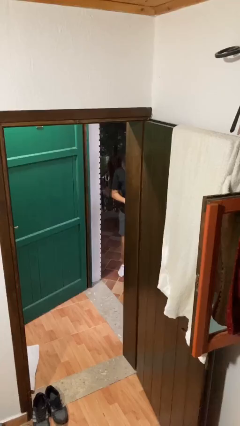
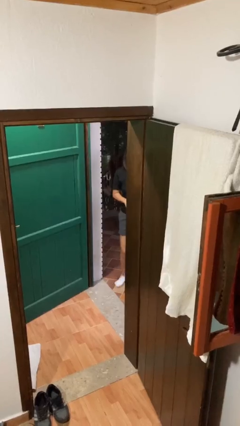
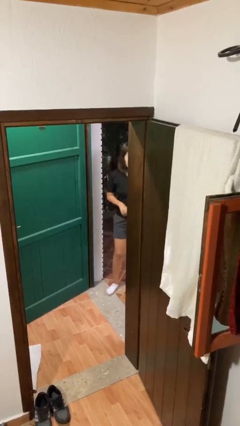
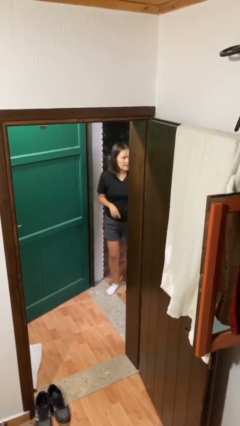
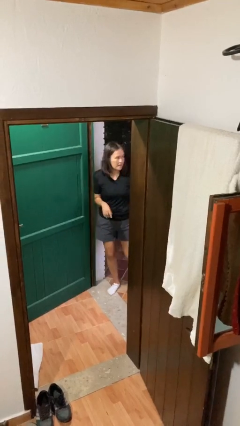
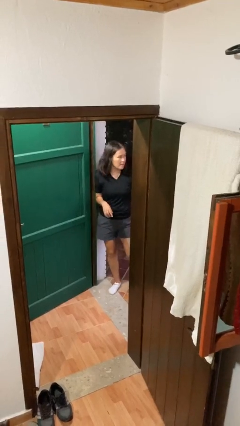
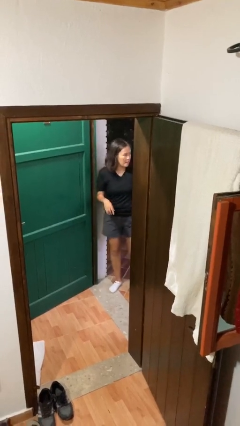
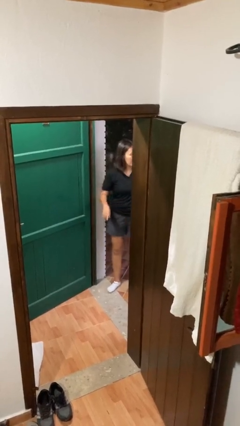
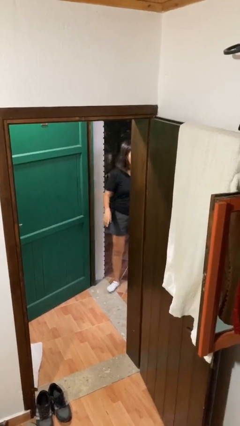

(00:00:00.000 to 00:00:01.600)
person bumps into wall

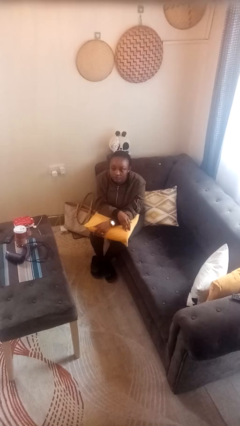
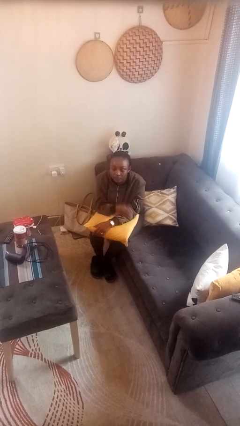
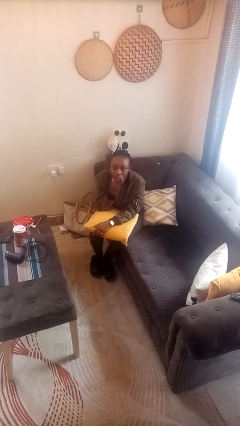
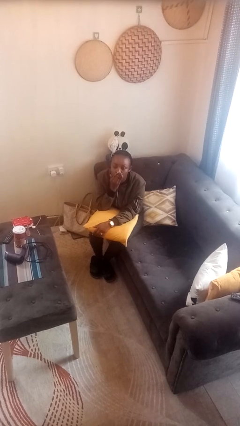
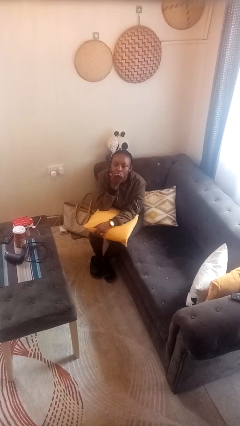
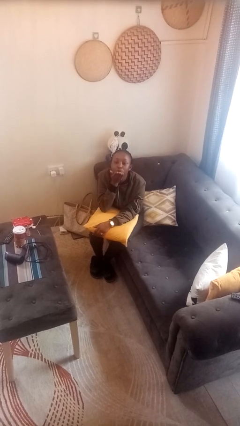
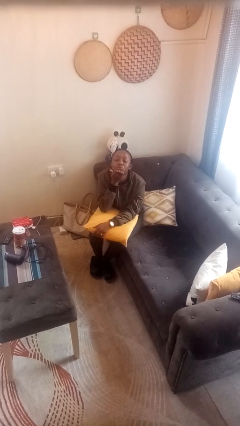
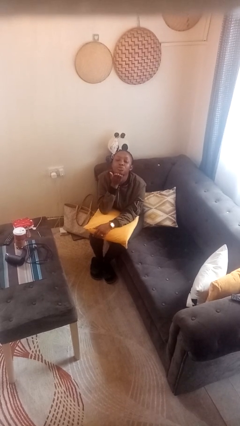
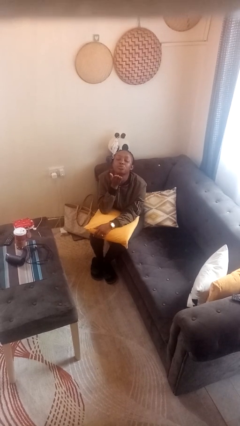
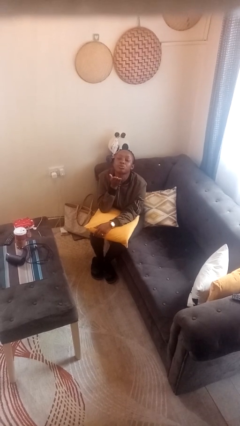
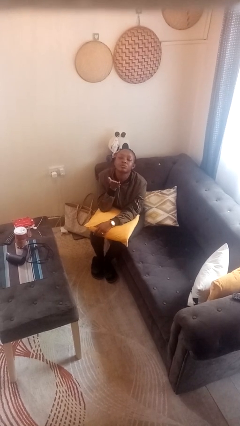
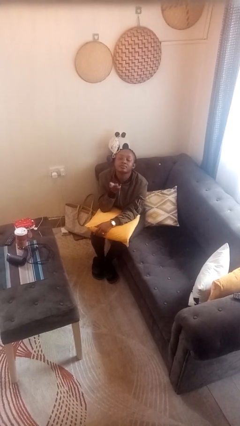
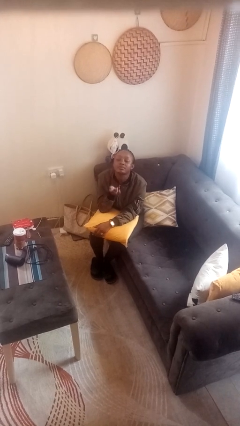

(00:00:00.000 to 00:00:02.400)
person gestures blow kiss

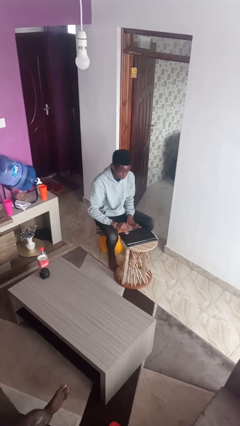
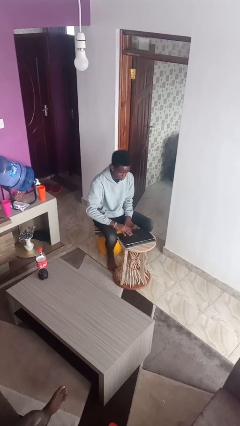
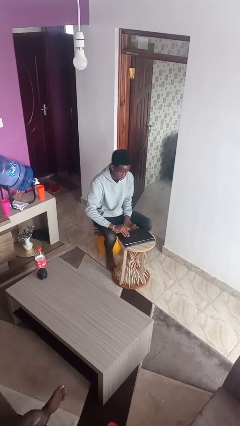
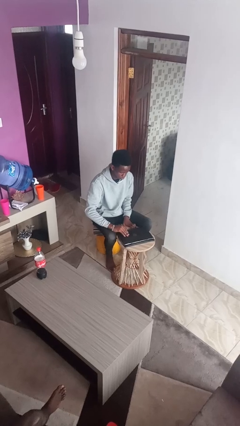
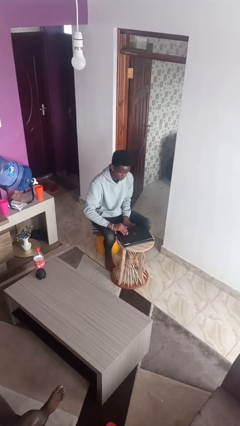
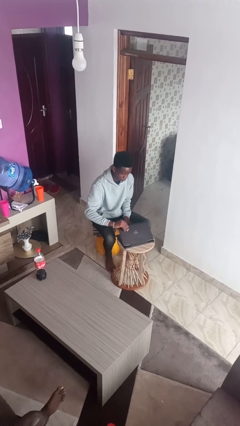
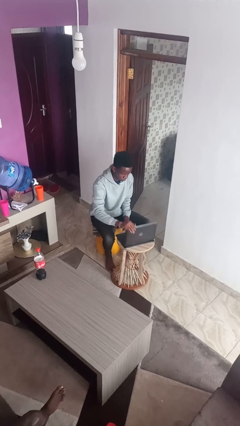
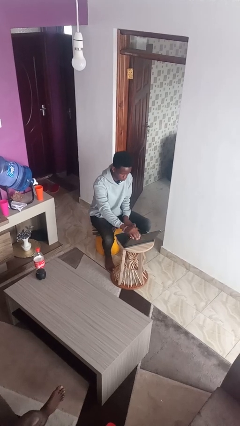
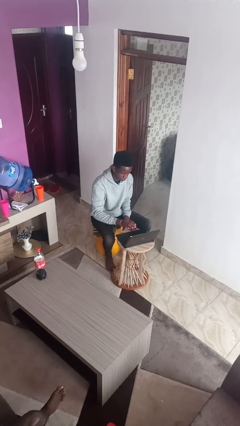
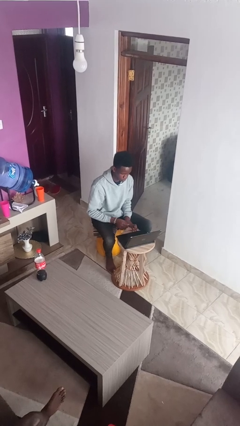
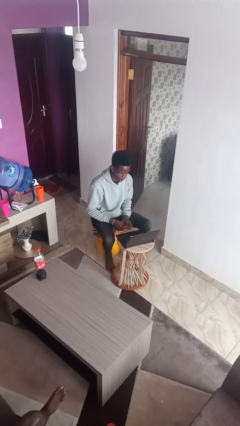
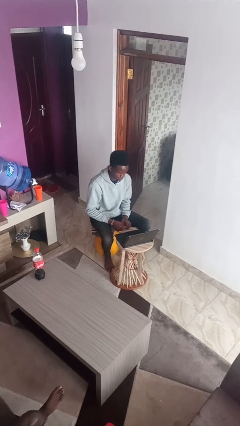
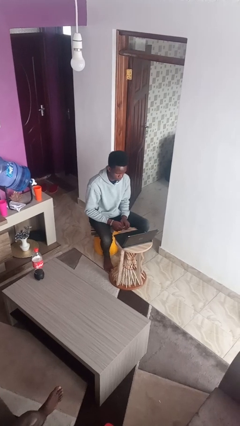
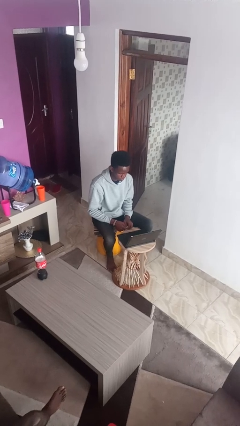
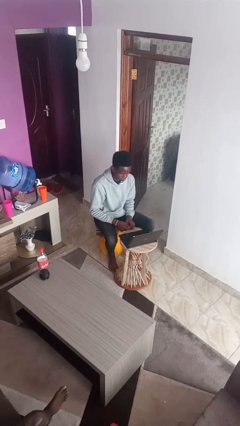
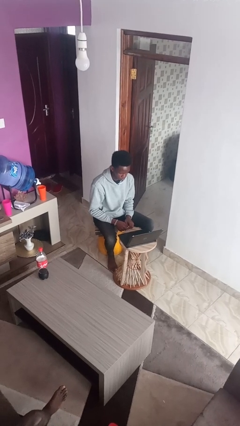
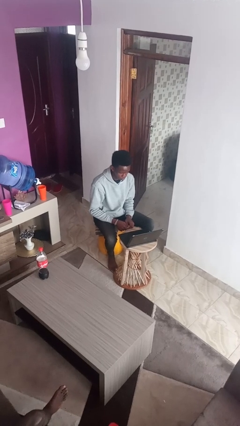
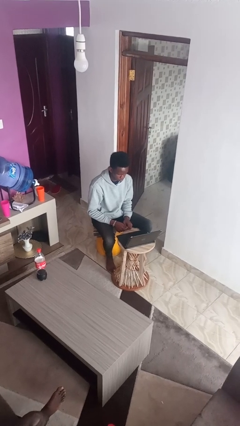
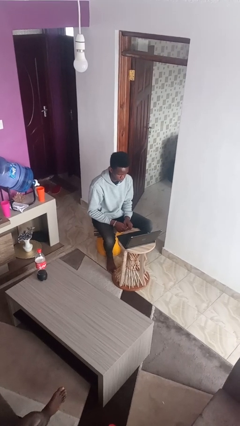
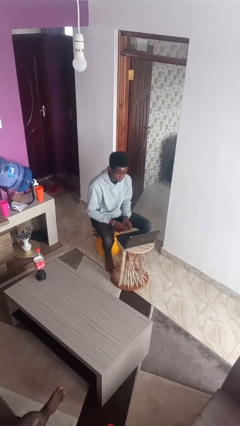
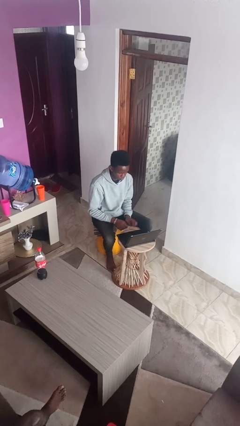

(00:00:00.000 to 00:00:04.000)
person opens laptop

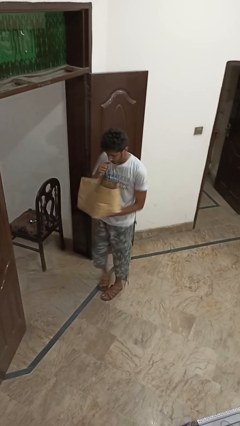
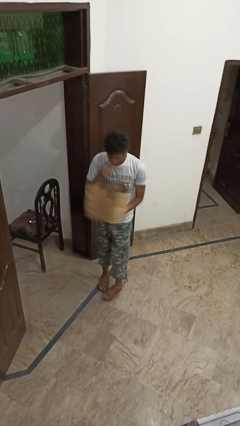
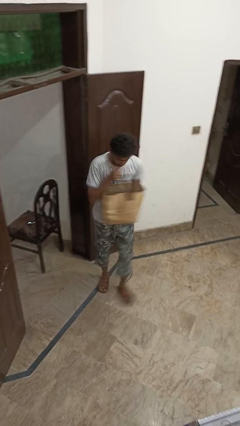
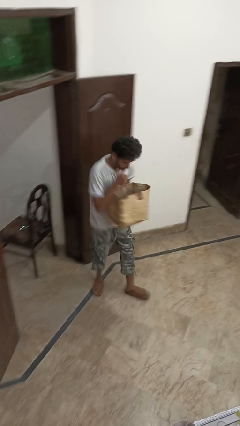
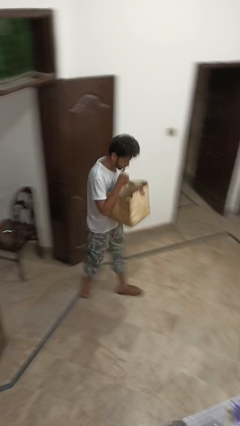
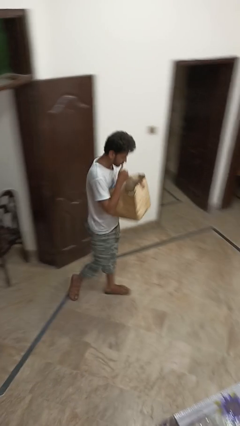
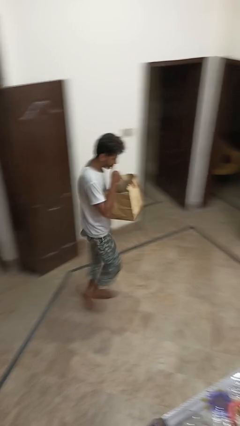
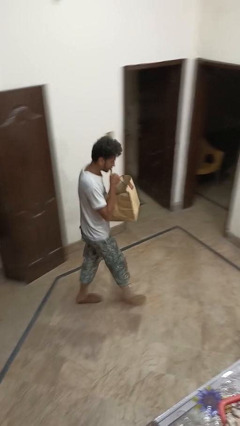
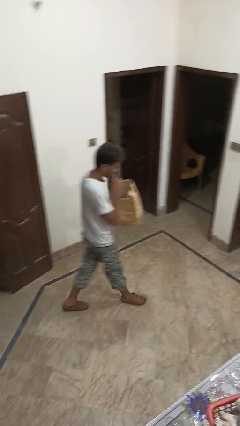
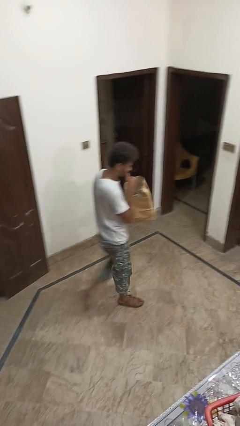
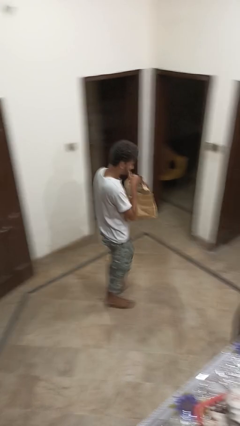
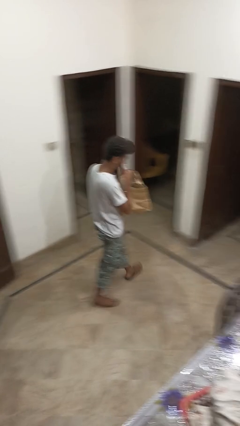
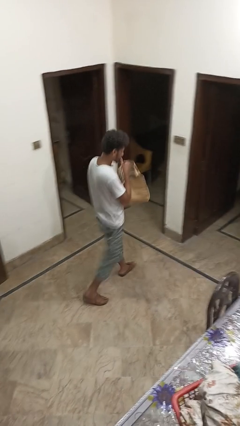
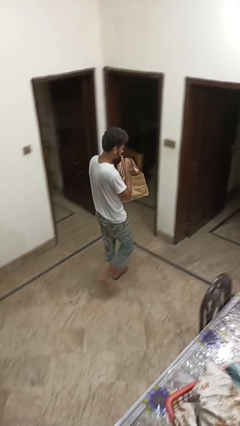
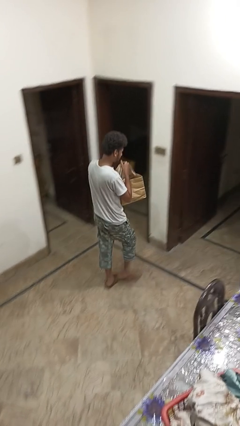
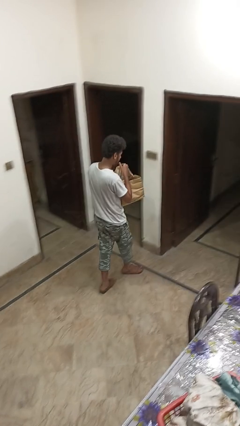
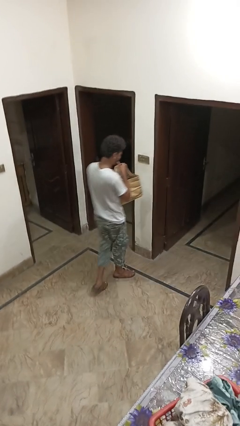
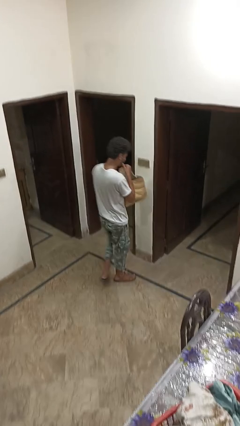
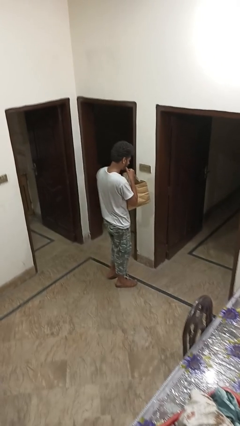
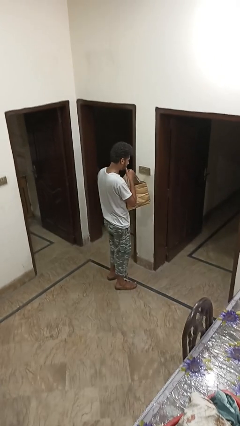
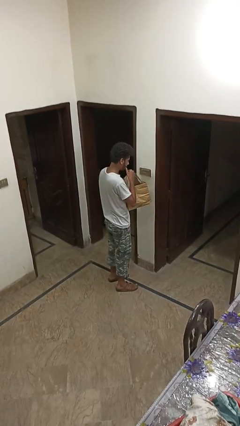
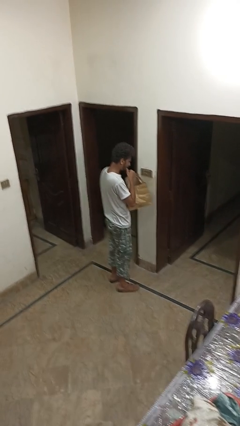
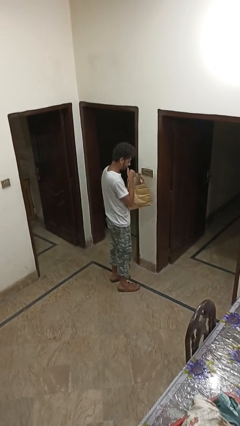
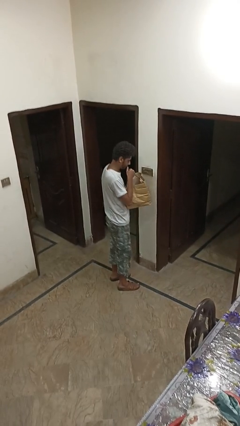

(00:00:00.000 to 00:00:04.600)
person carries groceries

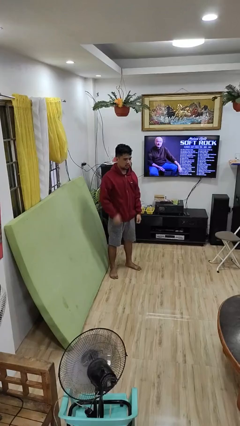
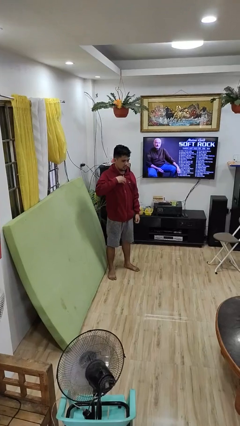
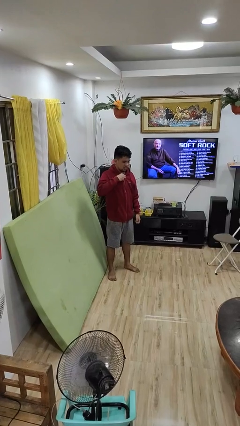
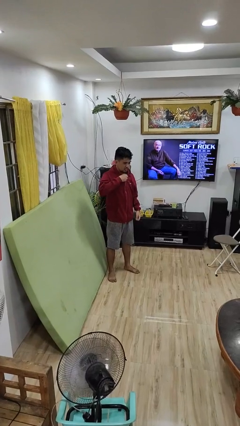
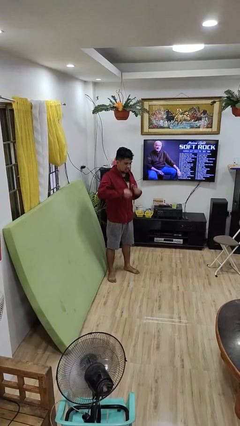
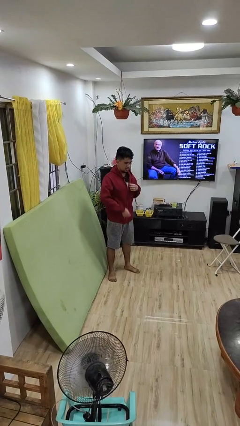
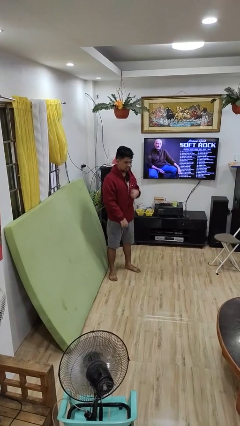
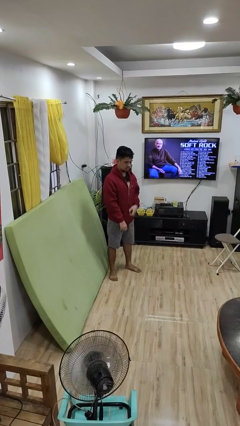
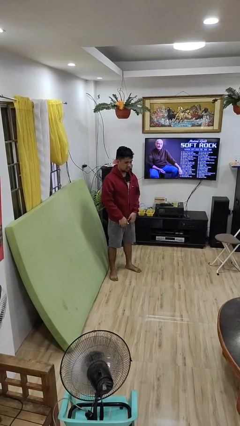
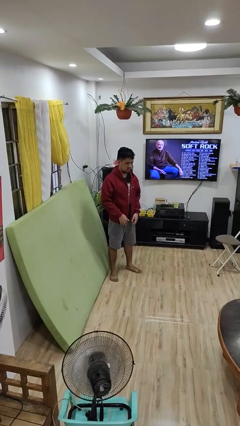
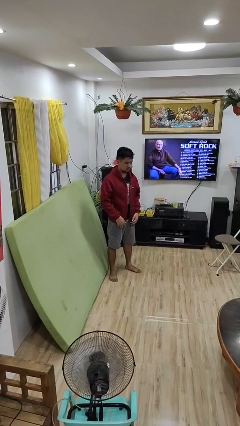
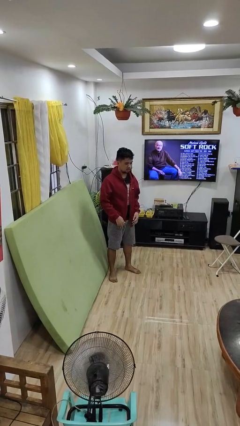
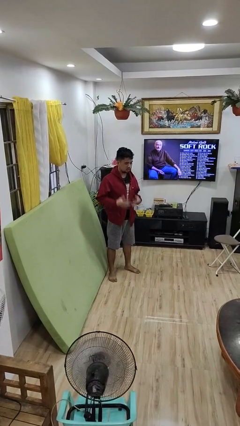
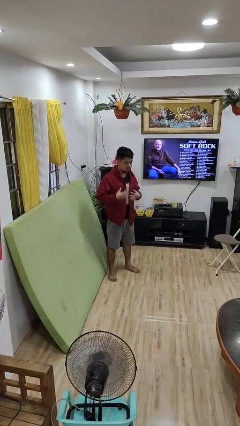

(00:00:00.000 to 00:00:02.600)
person unzips jacket

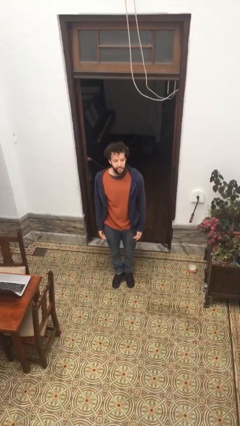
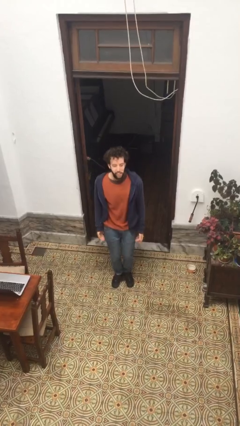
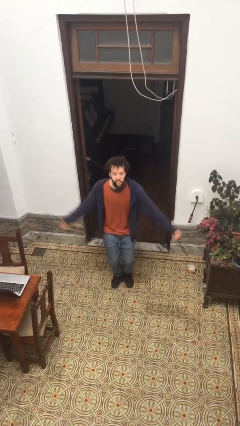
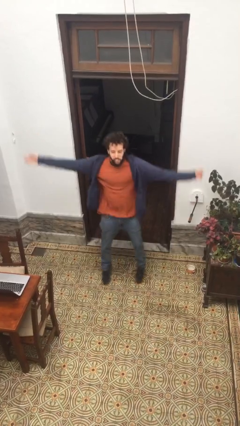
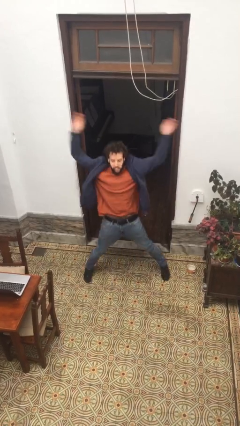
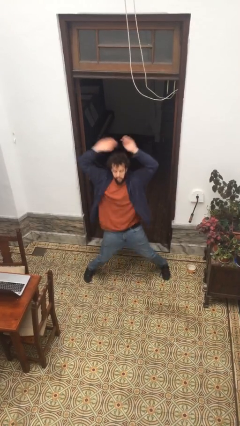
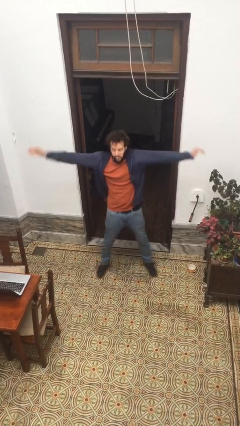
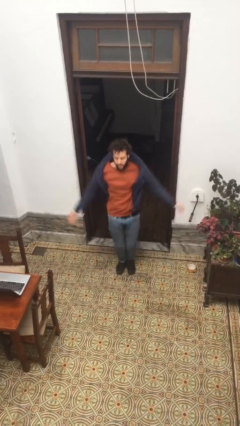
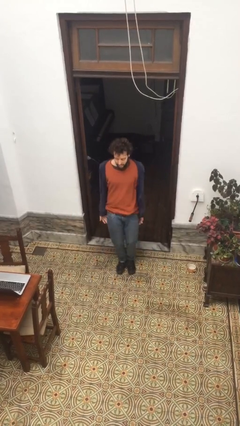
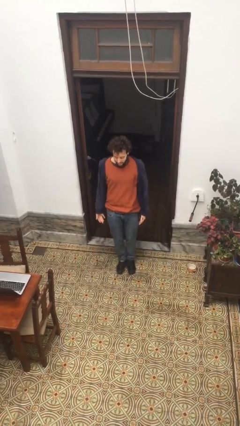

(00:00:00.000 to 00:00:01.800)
person exercises with jumping jacks

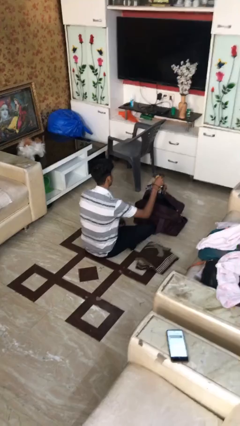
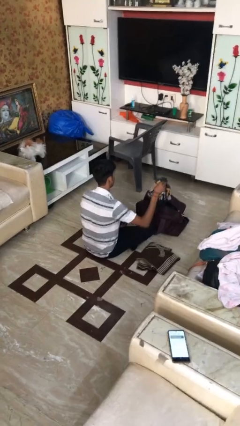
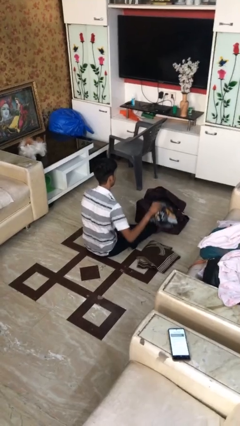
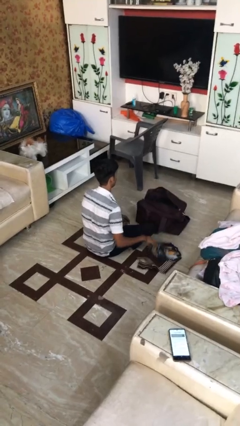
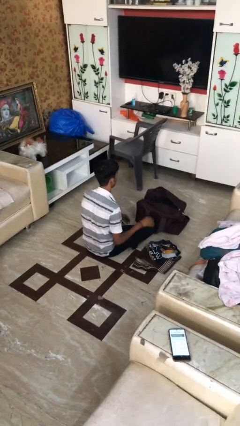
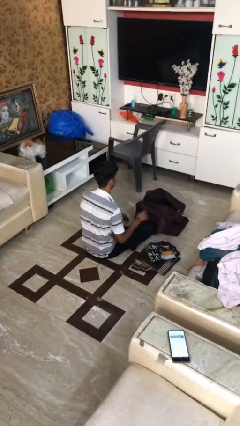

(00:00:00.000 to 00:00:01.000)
person unloads clothes from suitcase
